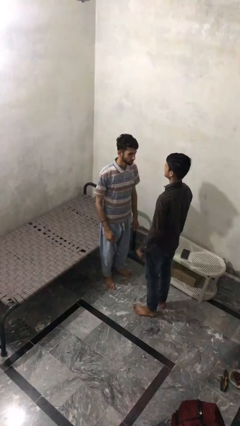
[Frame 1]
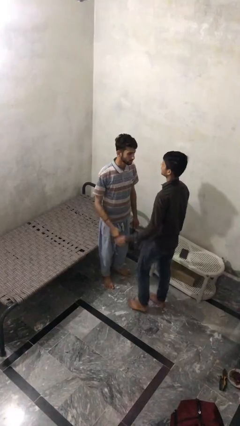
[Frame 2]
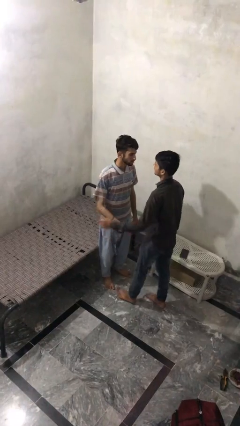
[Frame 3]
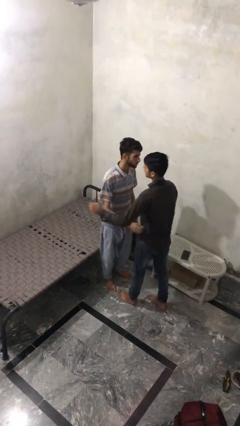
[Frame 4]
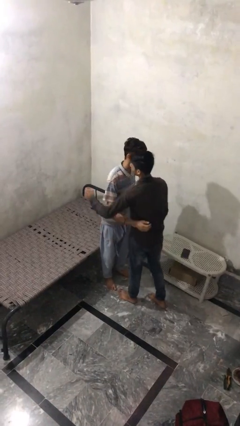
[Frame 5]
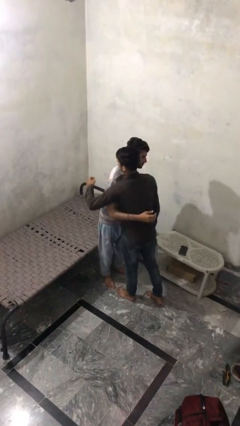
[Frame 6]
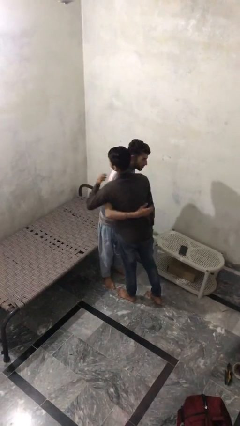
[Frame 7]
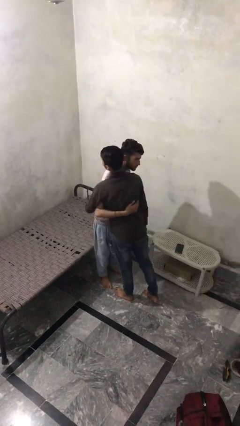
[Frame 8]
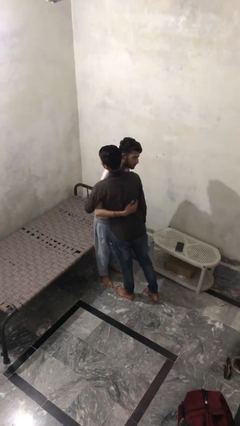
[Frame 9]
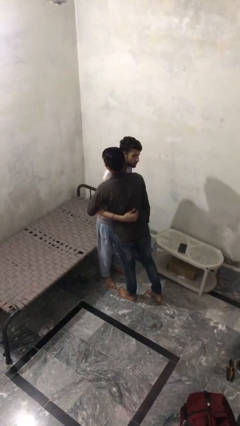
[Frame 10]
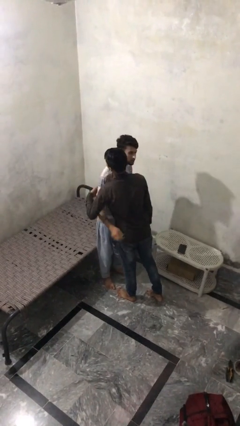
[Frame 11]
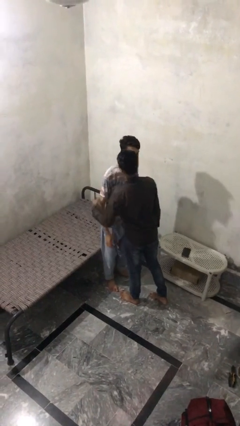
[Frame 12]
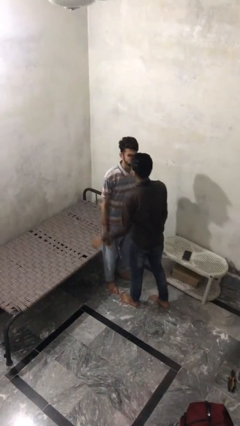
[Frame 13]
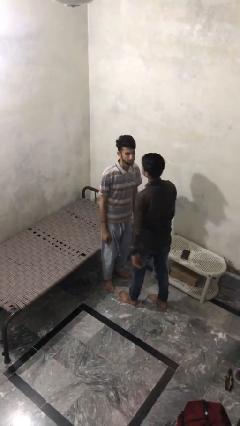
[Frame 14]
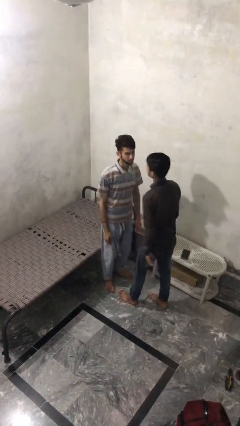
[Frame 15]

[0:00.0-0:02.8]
person embraces person

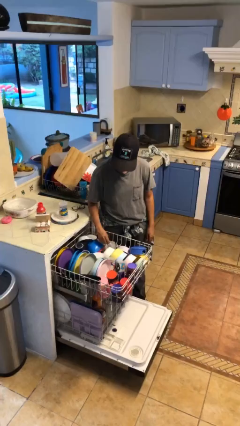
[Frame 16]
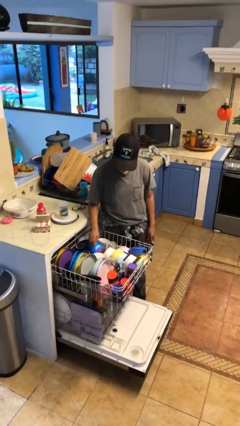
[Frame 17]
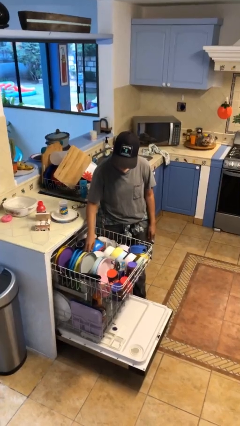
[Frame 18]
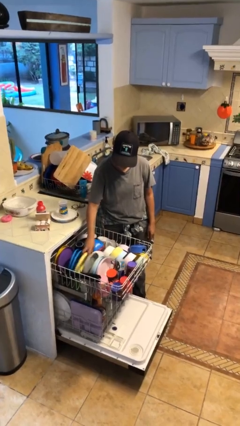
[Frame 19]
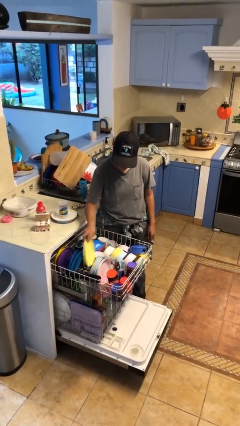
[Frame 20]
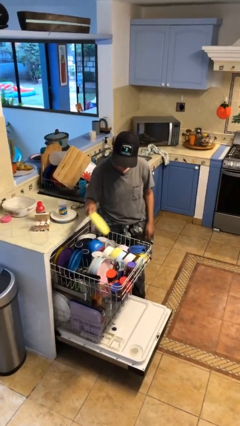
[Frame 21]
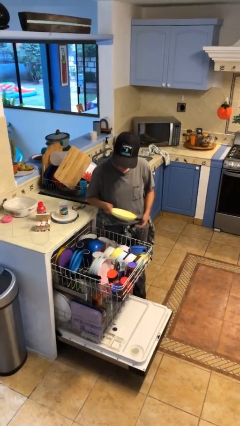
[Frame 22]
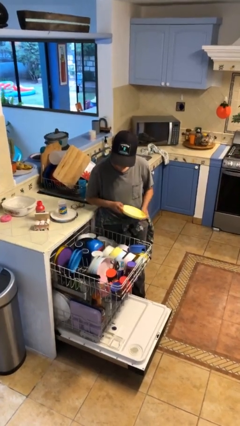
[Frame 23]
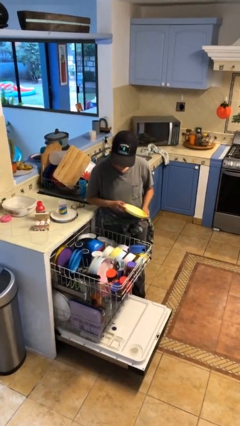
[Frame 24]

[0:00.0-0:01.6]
person unloads dishwasher

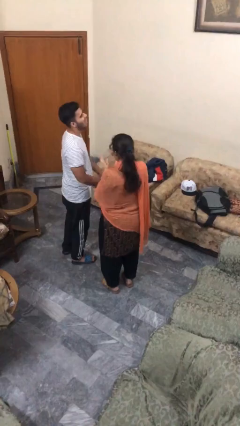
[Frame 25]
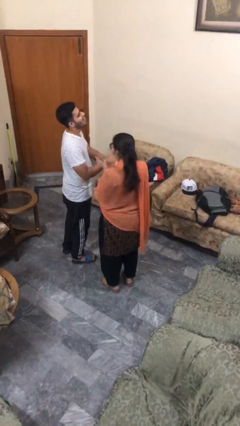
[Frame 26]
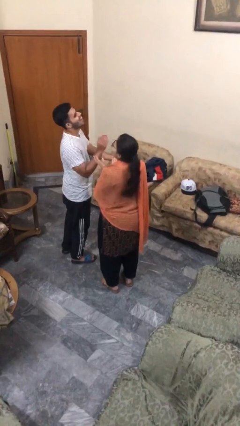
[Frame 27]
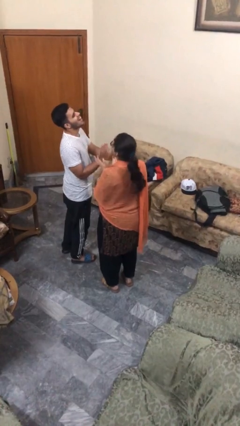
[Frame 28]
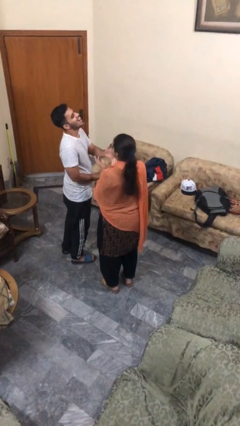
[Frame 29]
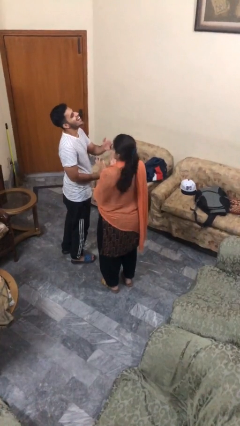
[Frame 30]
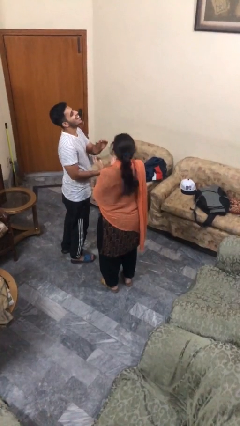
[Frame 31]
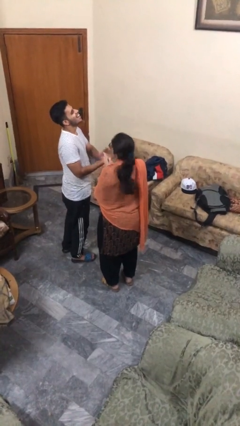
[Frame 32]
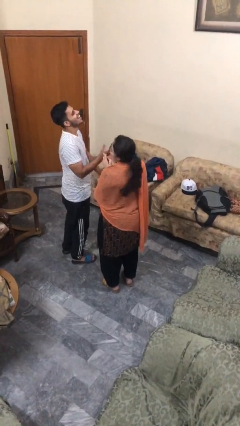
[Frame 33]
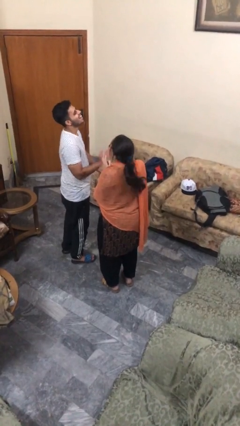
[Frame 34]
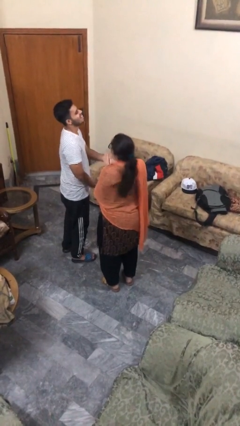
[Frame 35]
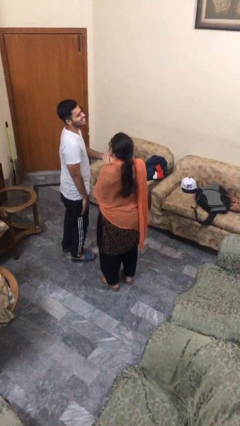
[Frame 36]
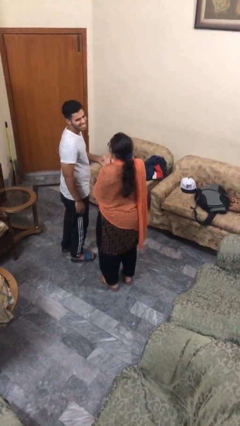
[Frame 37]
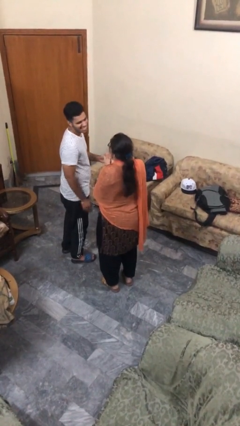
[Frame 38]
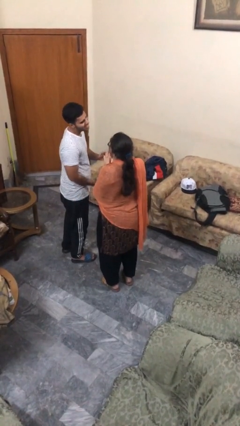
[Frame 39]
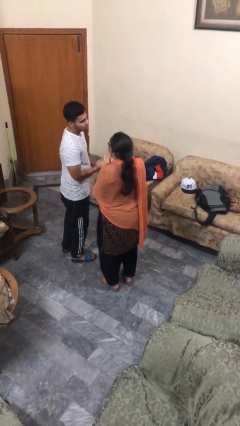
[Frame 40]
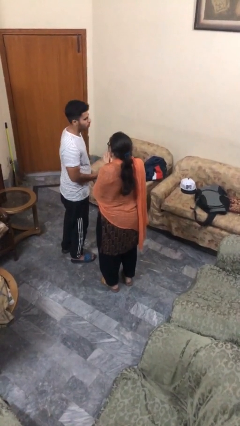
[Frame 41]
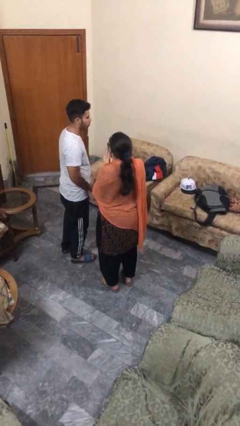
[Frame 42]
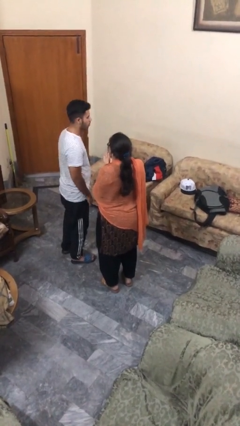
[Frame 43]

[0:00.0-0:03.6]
person laughs with person

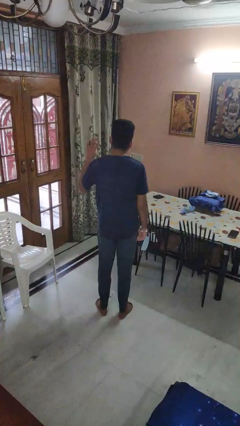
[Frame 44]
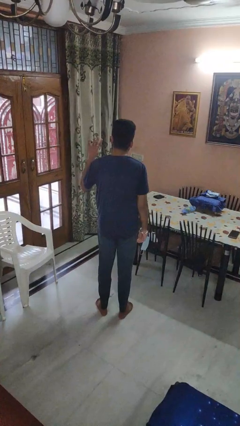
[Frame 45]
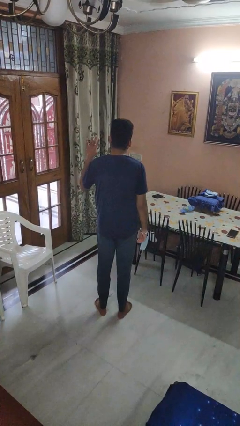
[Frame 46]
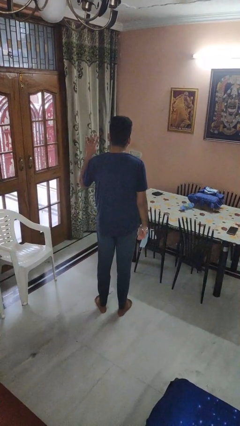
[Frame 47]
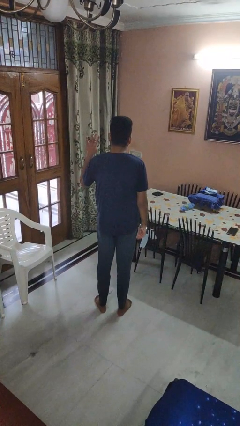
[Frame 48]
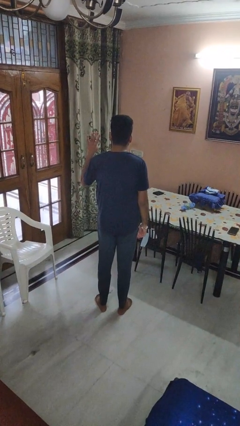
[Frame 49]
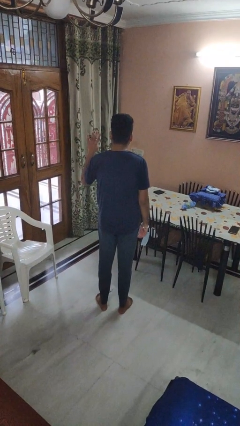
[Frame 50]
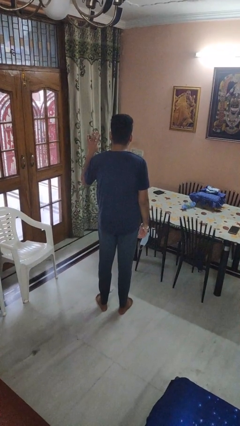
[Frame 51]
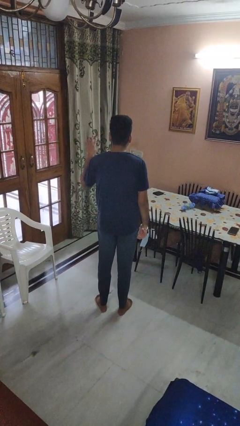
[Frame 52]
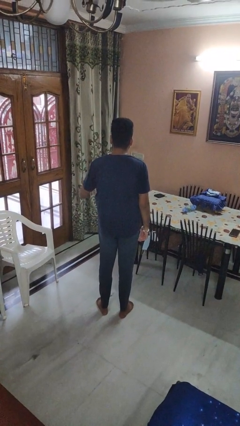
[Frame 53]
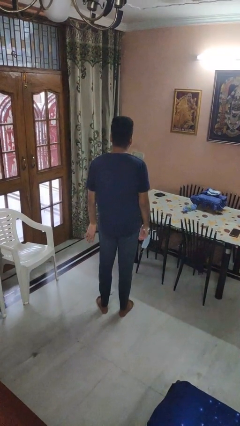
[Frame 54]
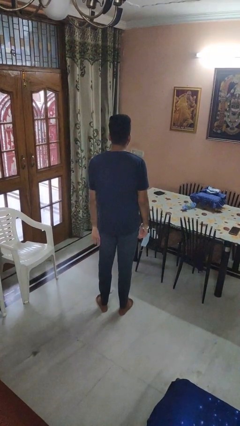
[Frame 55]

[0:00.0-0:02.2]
person gestures number four

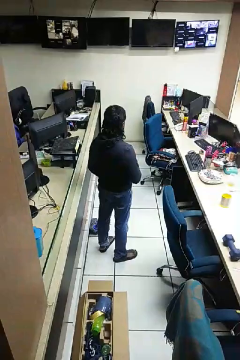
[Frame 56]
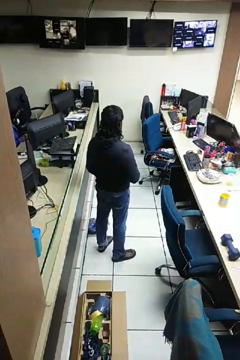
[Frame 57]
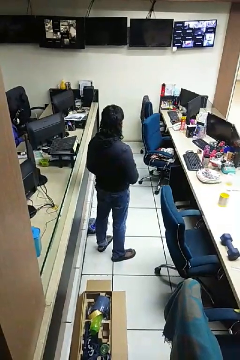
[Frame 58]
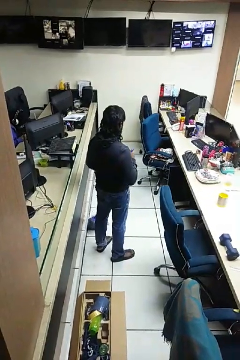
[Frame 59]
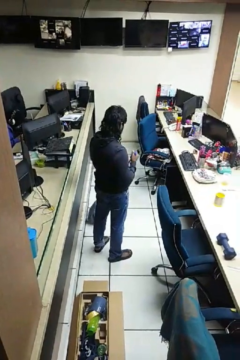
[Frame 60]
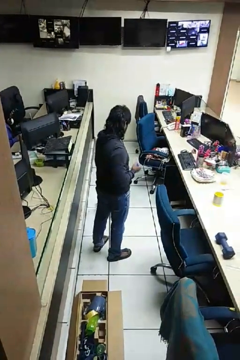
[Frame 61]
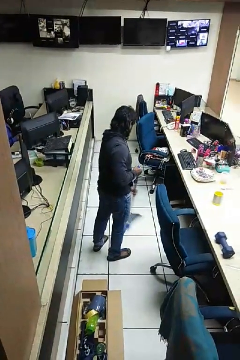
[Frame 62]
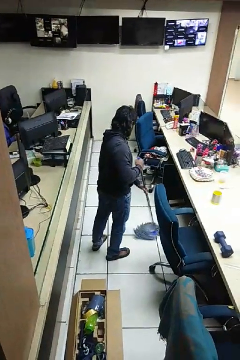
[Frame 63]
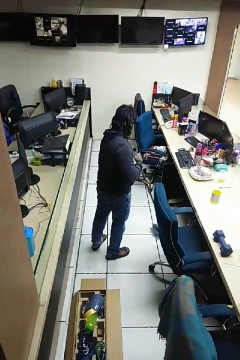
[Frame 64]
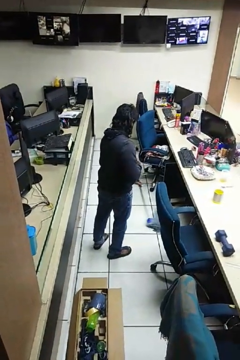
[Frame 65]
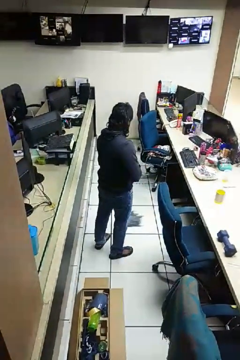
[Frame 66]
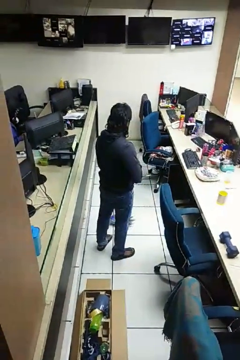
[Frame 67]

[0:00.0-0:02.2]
person mops

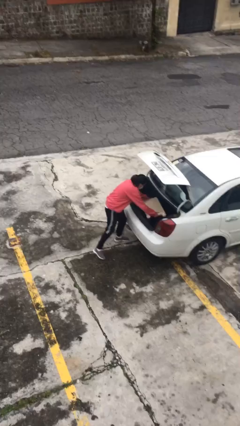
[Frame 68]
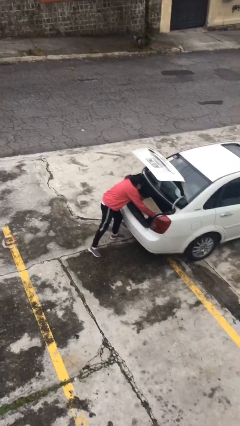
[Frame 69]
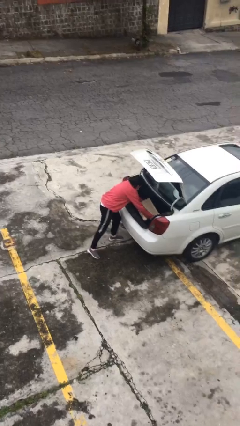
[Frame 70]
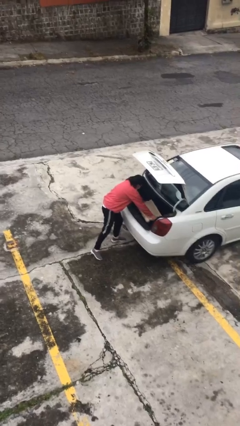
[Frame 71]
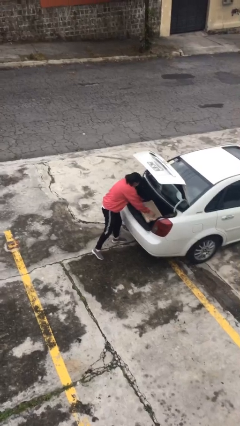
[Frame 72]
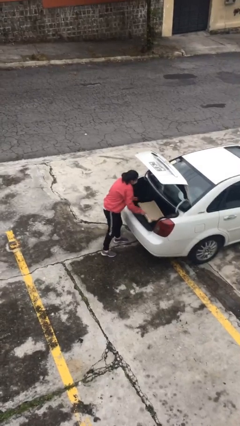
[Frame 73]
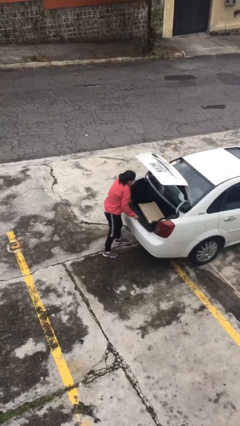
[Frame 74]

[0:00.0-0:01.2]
person loads car

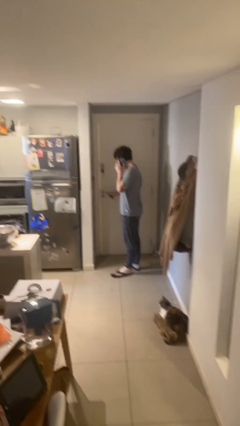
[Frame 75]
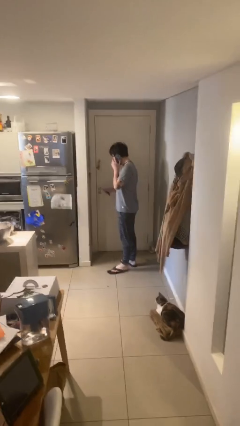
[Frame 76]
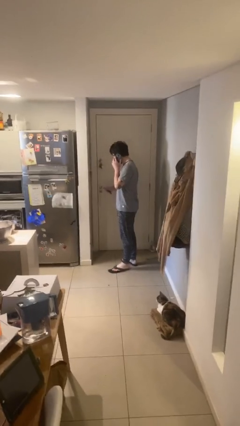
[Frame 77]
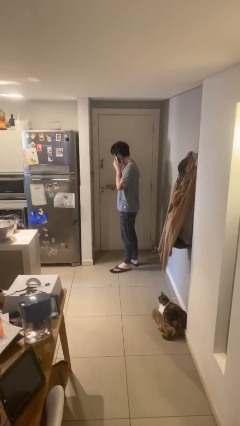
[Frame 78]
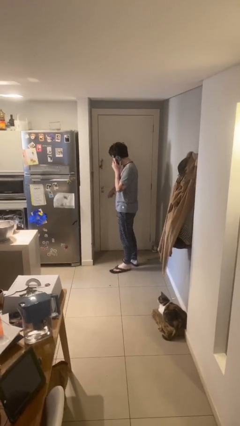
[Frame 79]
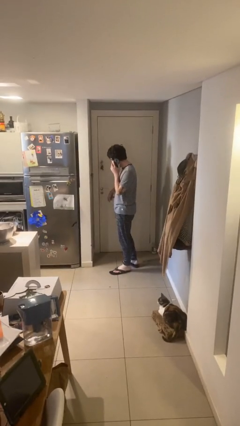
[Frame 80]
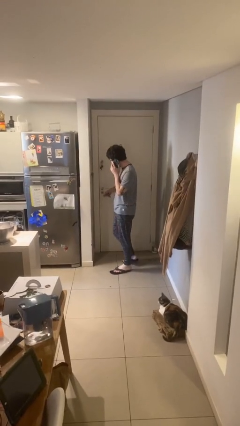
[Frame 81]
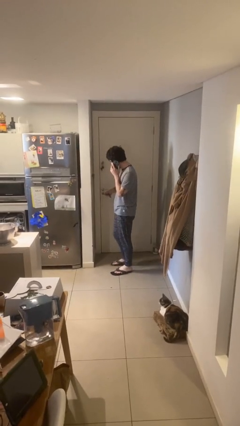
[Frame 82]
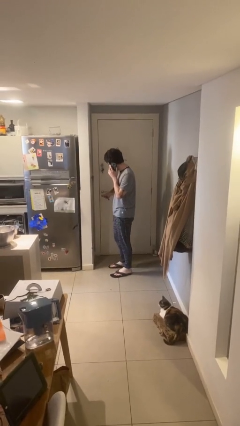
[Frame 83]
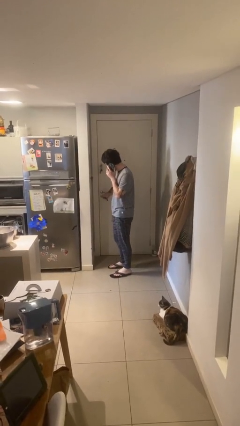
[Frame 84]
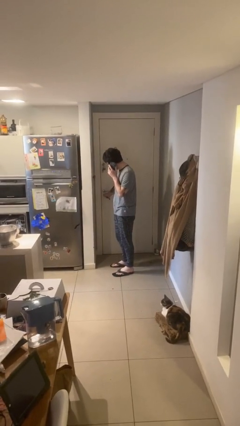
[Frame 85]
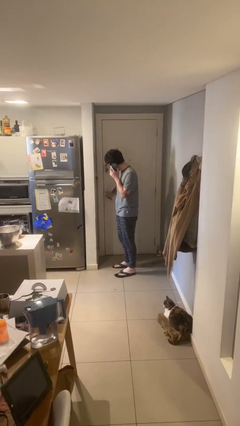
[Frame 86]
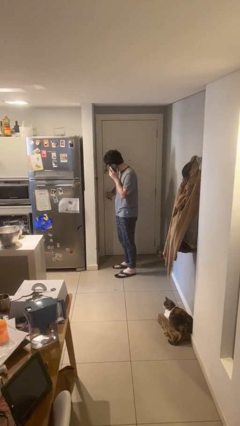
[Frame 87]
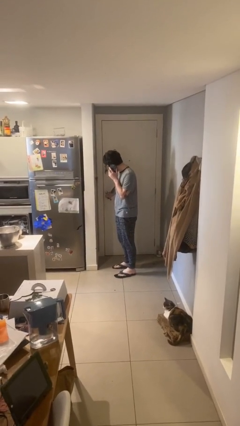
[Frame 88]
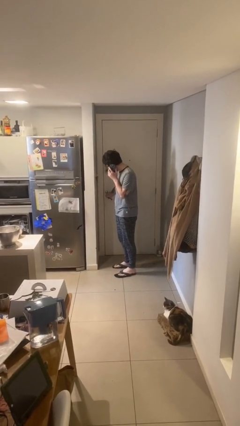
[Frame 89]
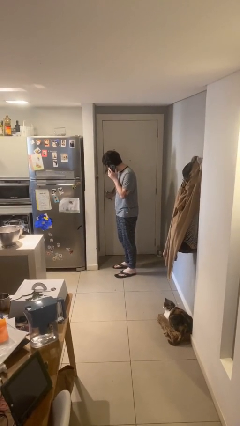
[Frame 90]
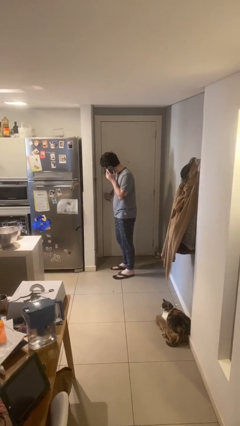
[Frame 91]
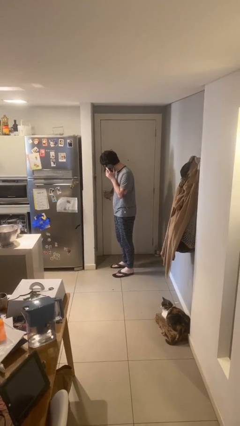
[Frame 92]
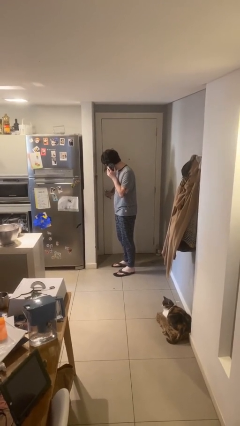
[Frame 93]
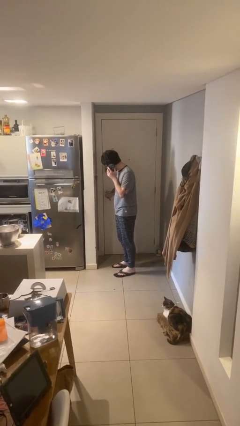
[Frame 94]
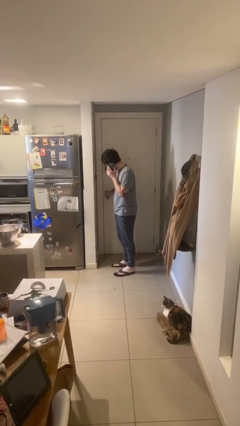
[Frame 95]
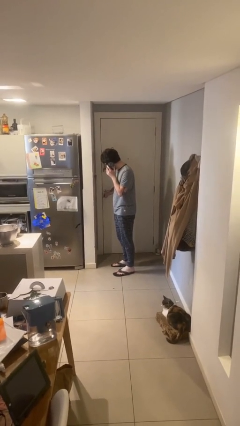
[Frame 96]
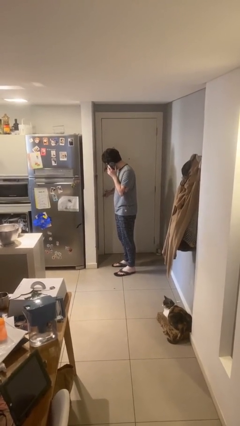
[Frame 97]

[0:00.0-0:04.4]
person closes facility door
